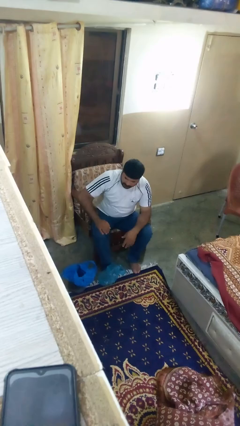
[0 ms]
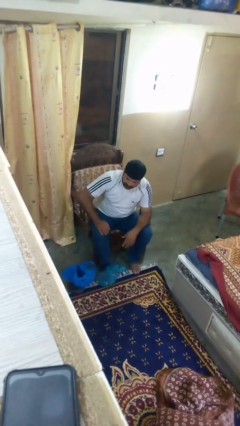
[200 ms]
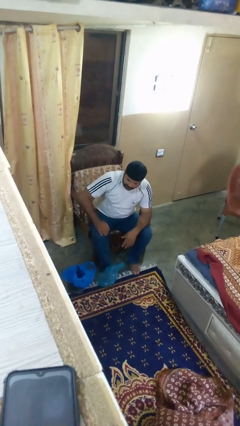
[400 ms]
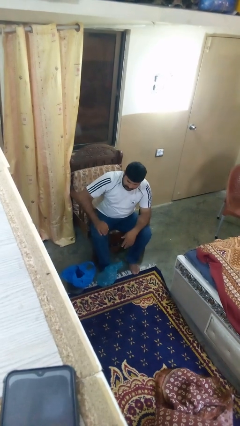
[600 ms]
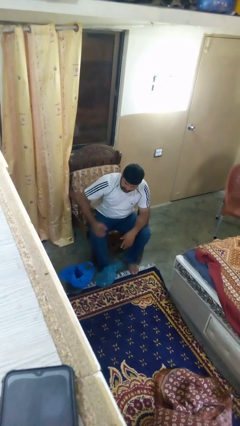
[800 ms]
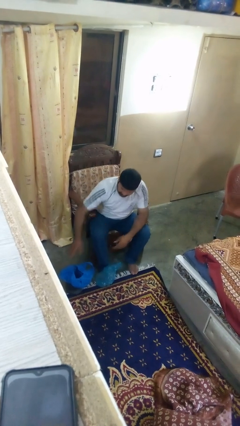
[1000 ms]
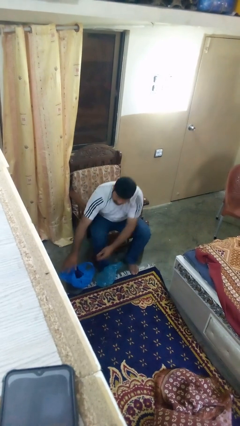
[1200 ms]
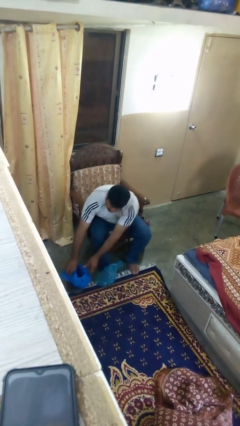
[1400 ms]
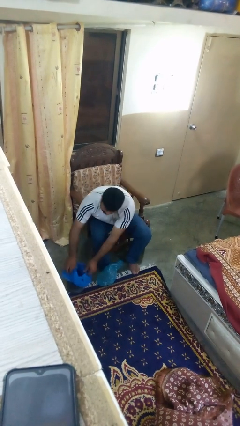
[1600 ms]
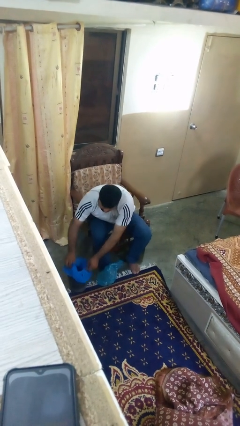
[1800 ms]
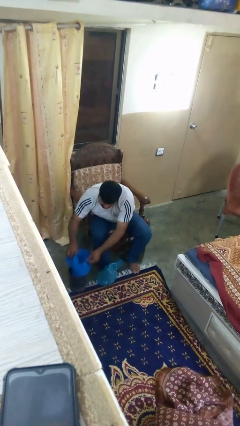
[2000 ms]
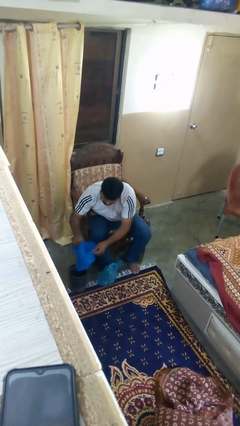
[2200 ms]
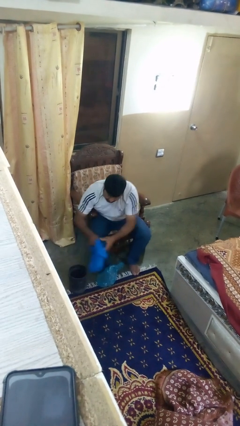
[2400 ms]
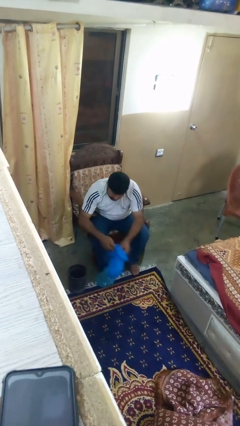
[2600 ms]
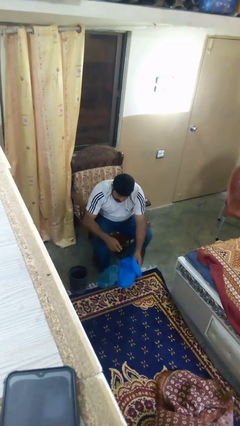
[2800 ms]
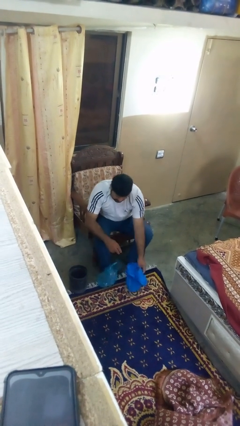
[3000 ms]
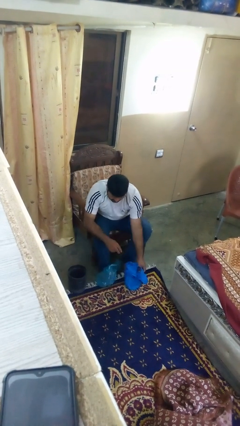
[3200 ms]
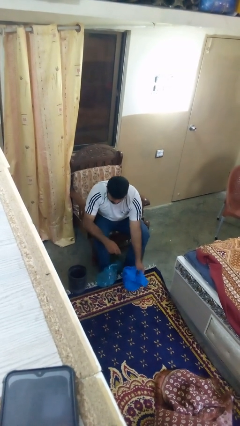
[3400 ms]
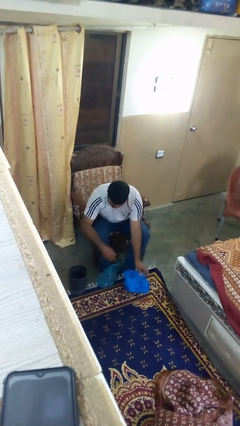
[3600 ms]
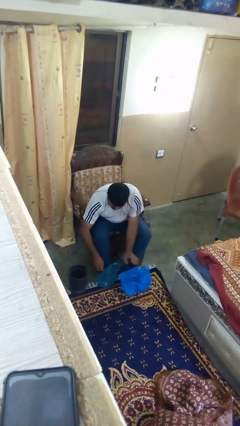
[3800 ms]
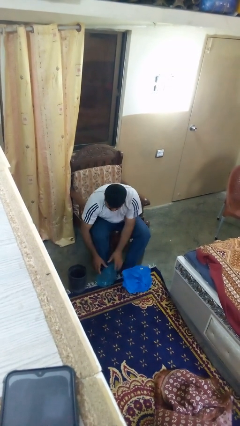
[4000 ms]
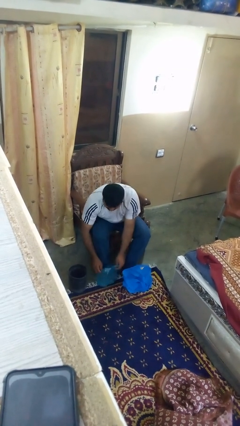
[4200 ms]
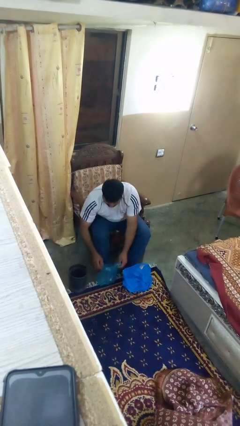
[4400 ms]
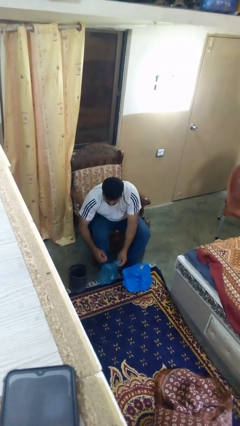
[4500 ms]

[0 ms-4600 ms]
person removes trashbag from trashcan

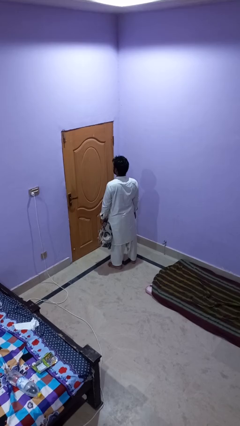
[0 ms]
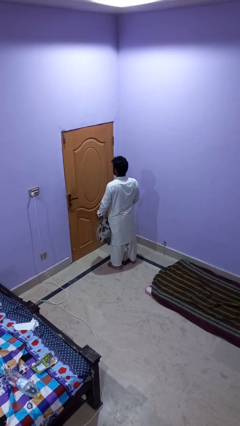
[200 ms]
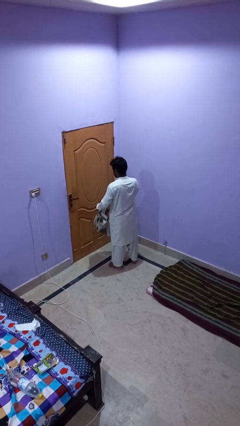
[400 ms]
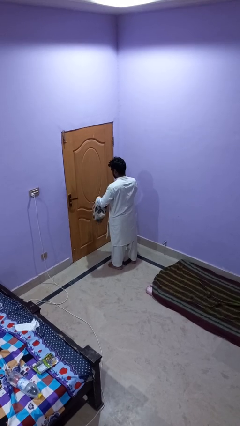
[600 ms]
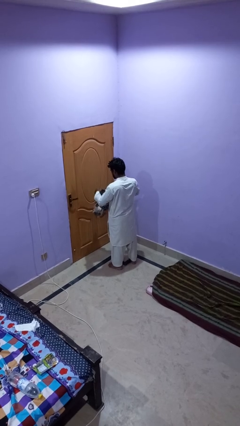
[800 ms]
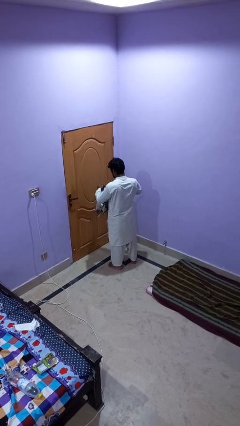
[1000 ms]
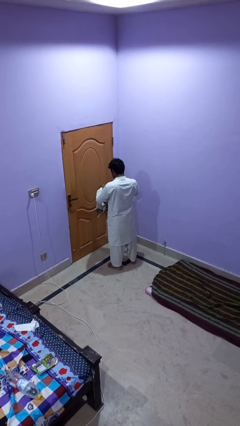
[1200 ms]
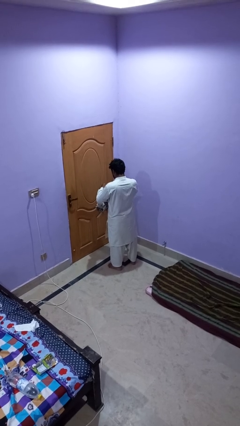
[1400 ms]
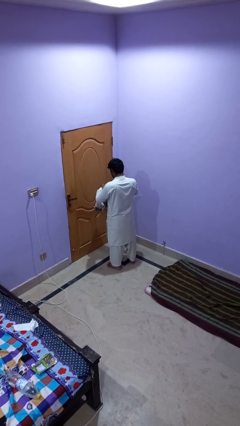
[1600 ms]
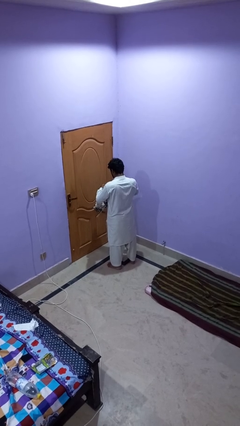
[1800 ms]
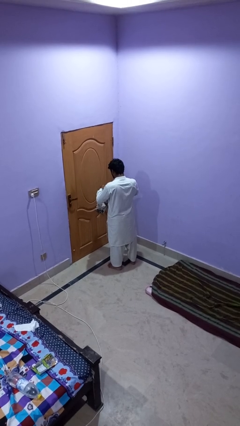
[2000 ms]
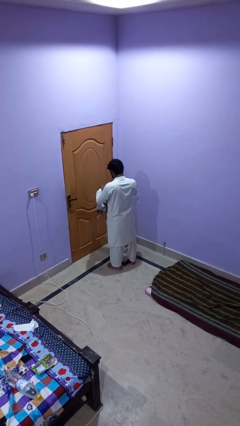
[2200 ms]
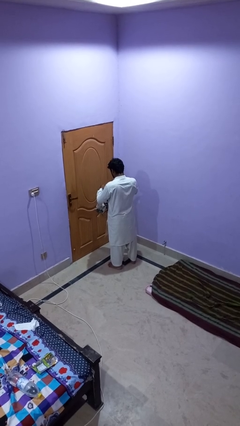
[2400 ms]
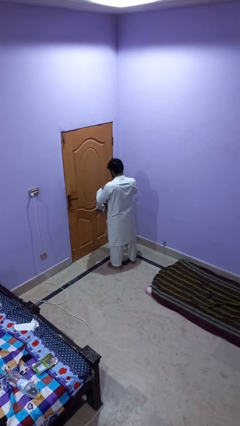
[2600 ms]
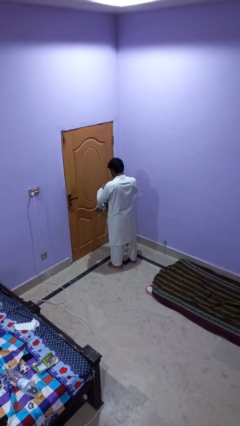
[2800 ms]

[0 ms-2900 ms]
person searches in backpack

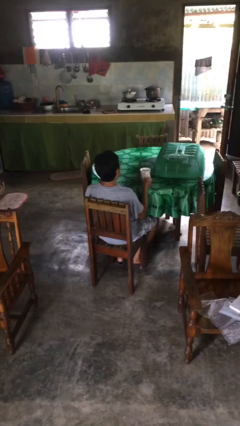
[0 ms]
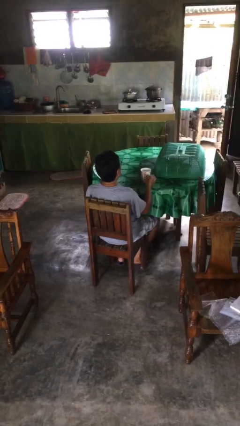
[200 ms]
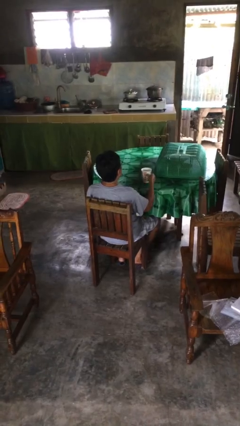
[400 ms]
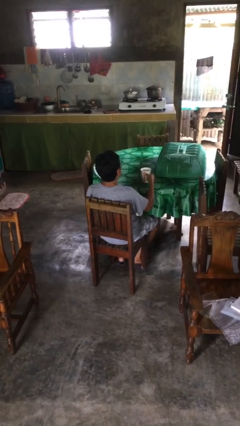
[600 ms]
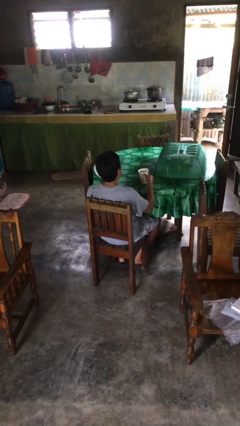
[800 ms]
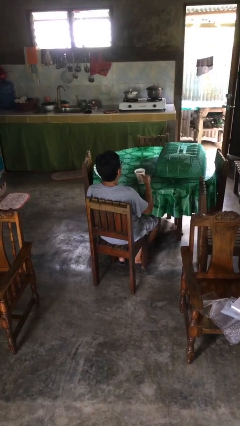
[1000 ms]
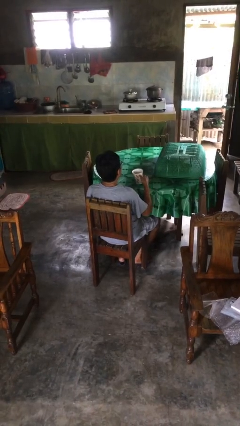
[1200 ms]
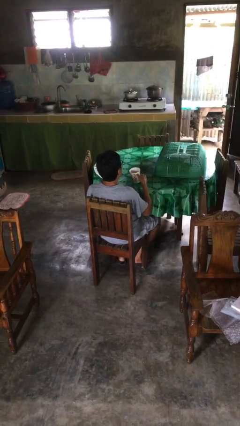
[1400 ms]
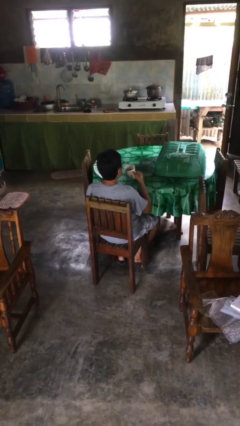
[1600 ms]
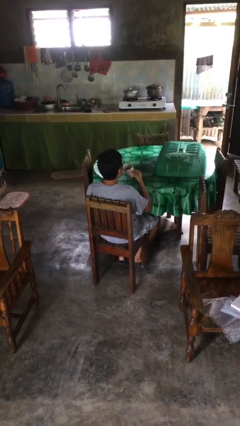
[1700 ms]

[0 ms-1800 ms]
person picks up object from table

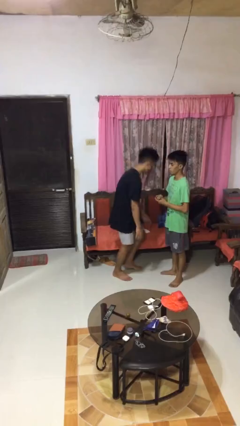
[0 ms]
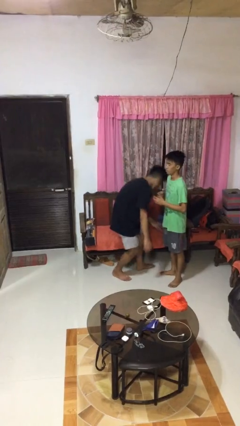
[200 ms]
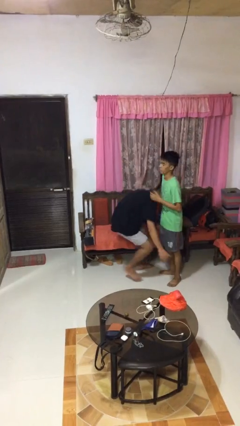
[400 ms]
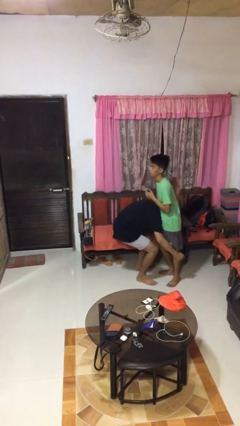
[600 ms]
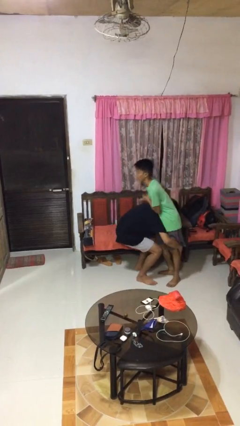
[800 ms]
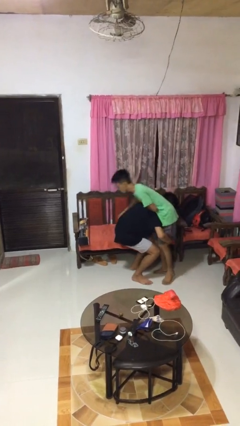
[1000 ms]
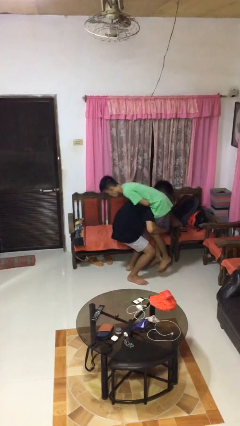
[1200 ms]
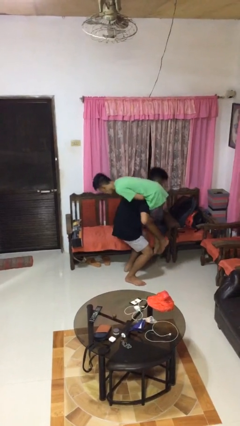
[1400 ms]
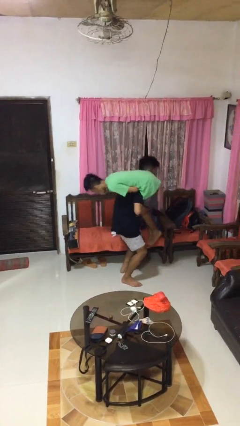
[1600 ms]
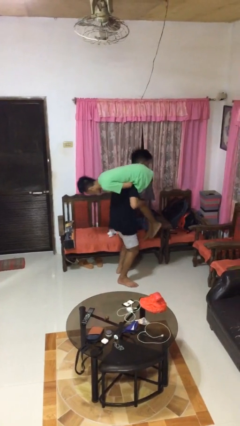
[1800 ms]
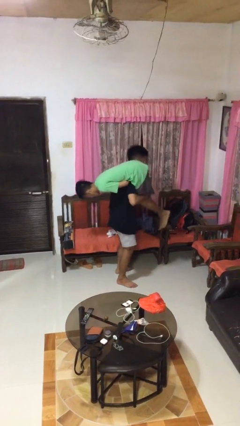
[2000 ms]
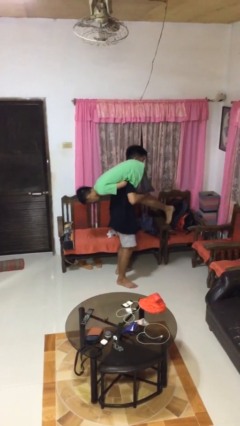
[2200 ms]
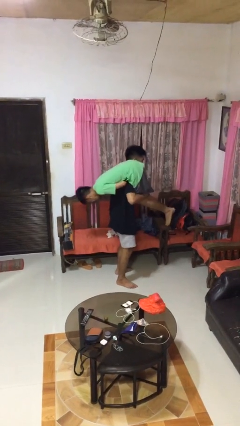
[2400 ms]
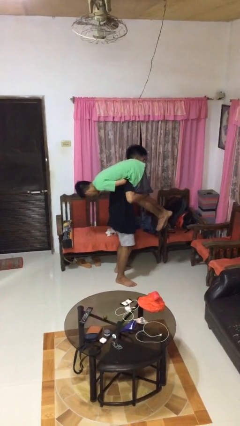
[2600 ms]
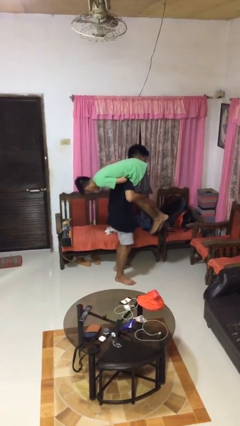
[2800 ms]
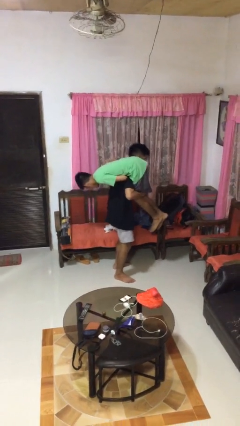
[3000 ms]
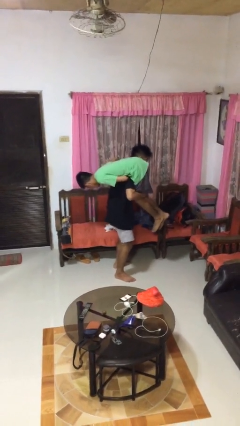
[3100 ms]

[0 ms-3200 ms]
person carries person over shoulder

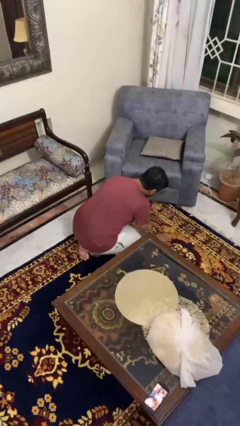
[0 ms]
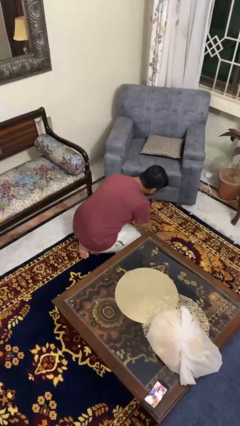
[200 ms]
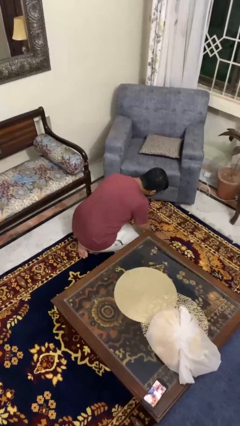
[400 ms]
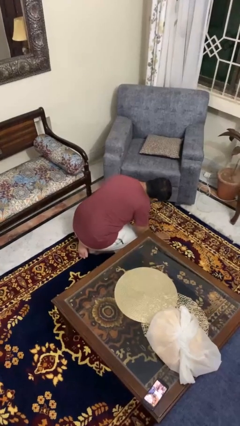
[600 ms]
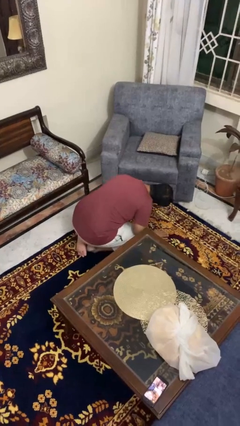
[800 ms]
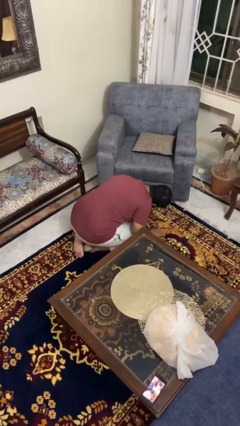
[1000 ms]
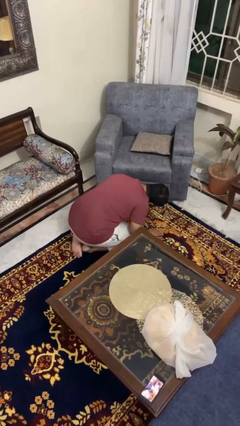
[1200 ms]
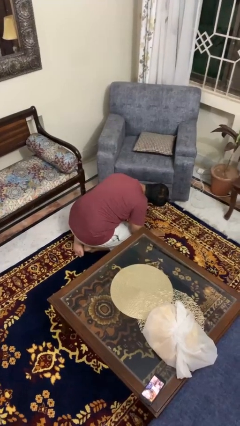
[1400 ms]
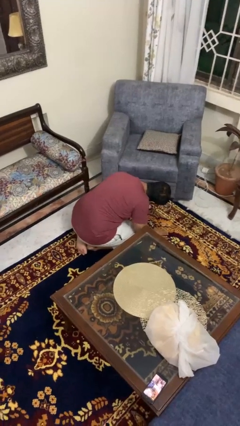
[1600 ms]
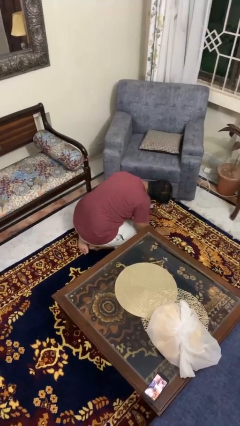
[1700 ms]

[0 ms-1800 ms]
person searches under couch

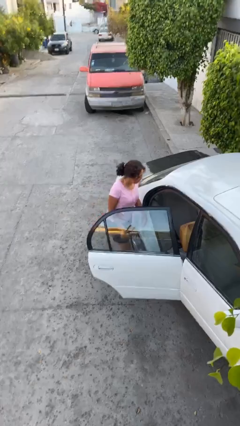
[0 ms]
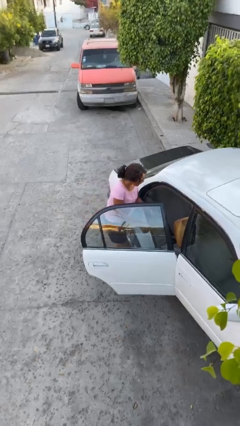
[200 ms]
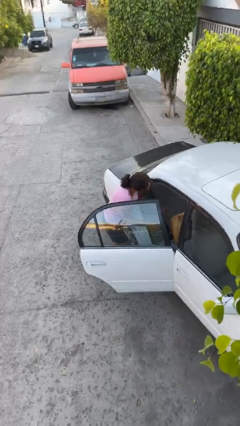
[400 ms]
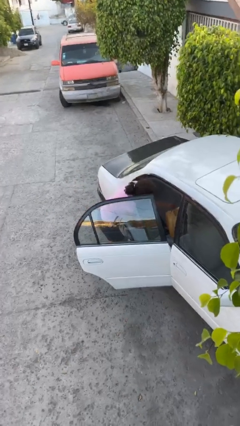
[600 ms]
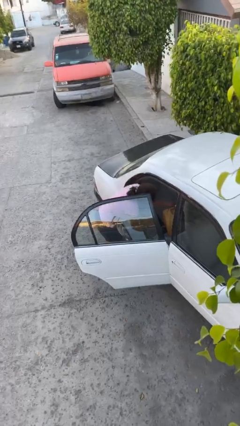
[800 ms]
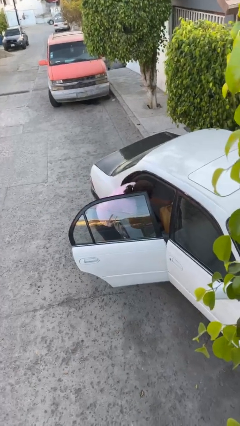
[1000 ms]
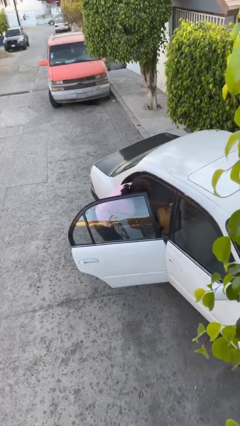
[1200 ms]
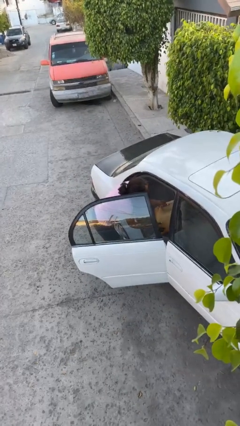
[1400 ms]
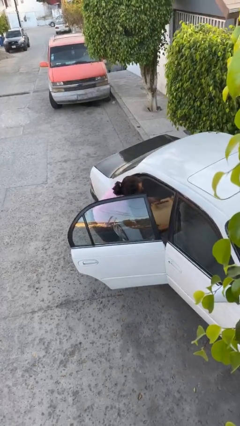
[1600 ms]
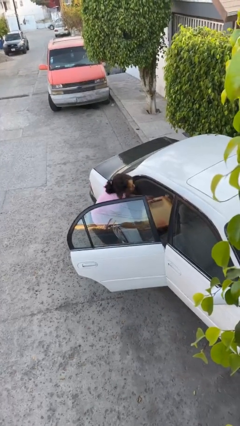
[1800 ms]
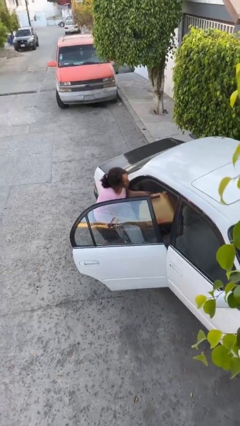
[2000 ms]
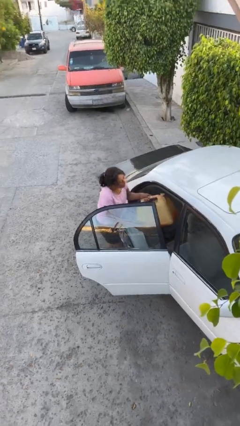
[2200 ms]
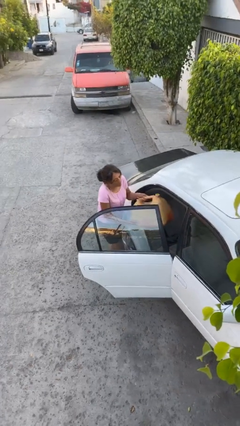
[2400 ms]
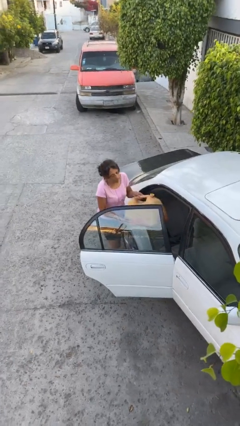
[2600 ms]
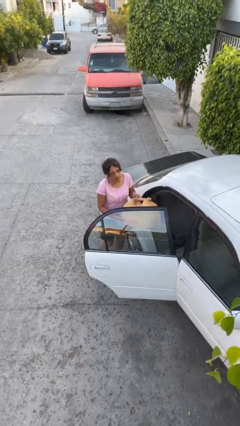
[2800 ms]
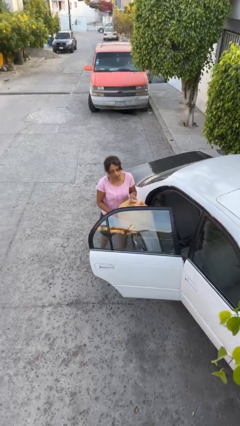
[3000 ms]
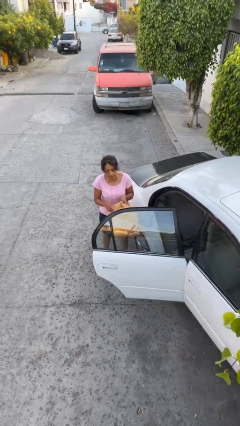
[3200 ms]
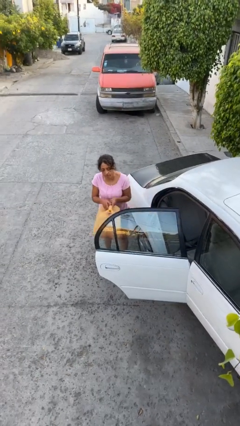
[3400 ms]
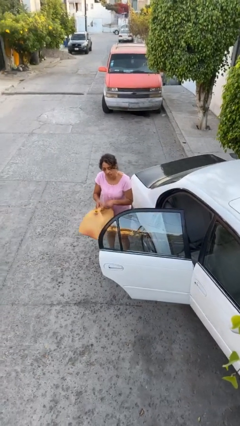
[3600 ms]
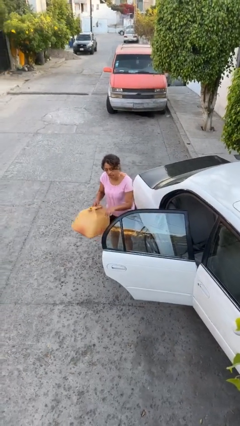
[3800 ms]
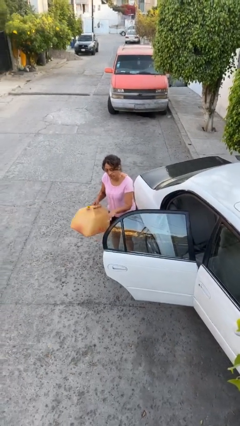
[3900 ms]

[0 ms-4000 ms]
person unloads car
